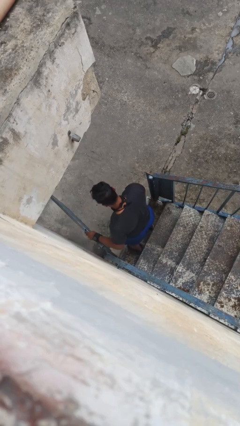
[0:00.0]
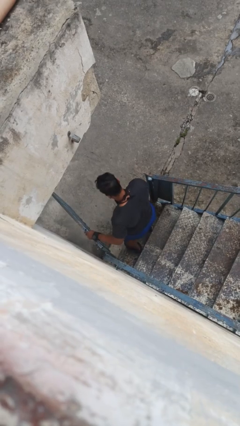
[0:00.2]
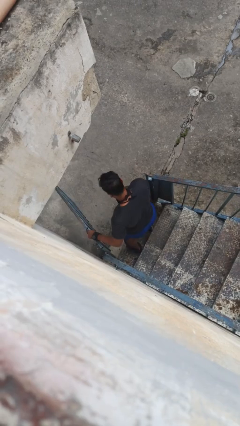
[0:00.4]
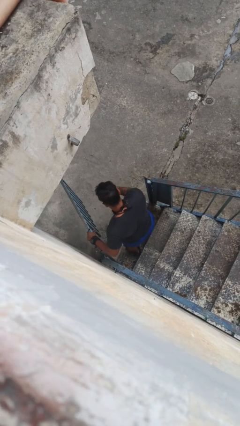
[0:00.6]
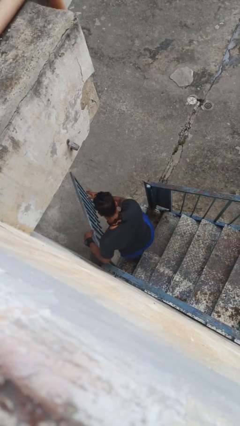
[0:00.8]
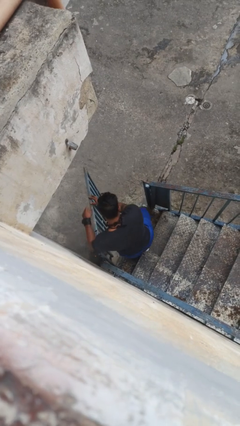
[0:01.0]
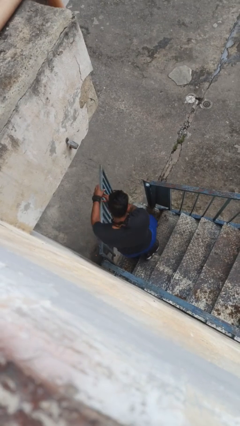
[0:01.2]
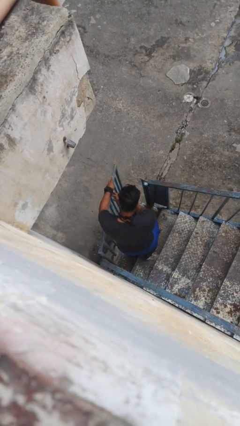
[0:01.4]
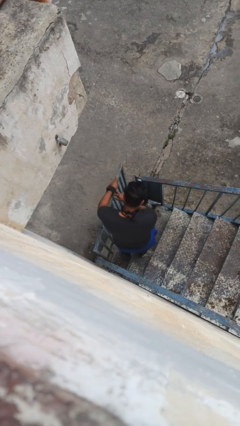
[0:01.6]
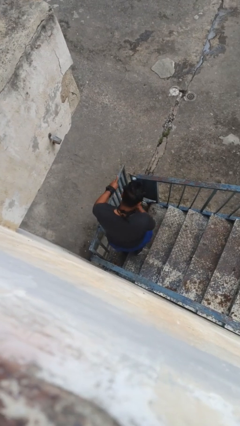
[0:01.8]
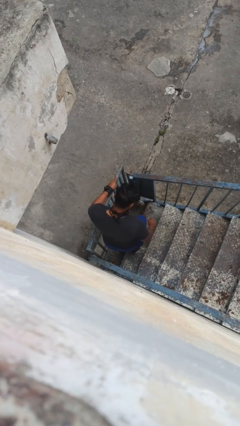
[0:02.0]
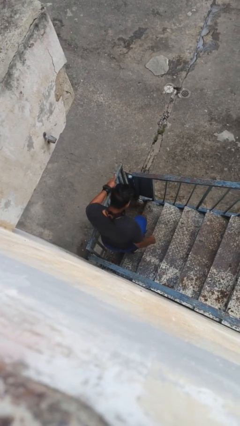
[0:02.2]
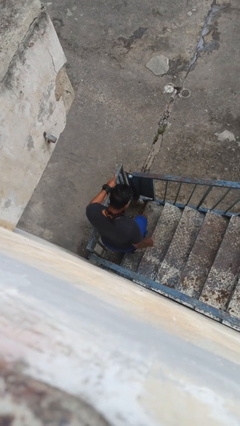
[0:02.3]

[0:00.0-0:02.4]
person closes facility door

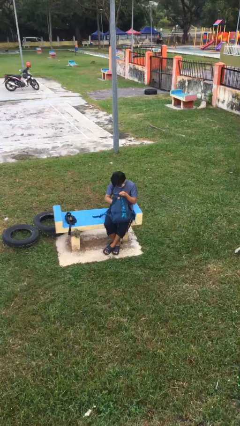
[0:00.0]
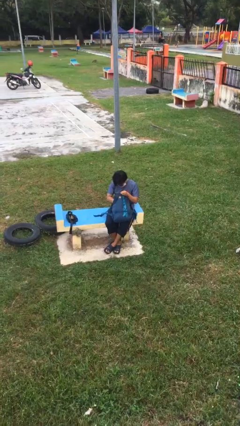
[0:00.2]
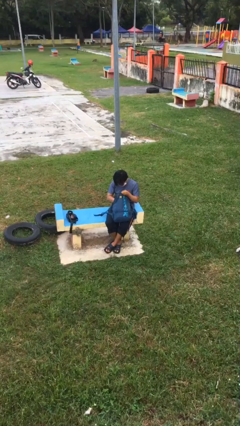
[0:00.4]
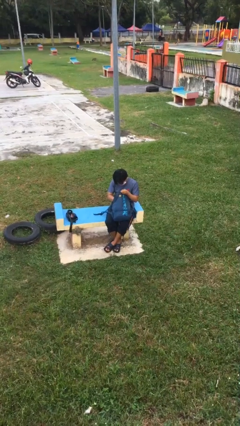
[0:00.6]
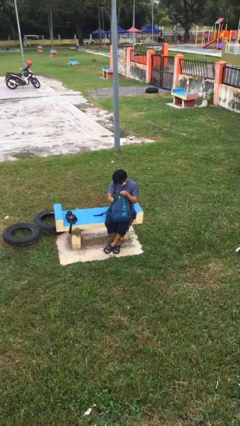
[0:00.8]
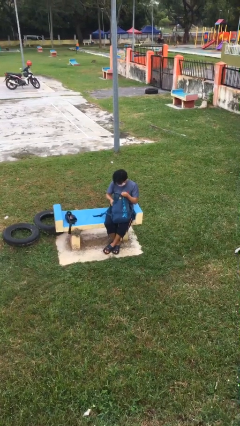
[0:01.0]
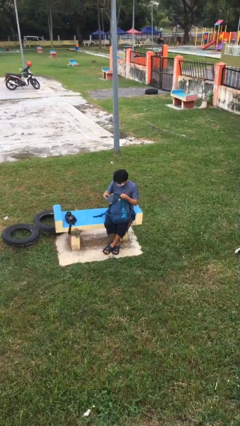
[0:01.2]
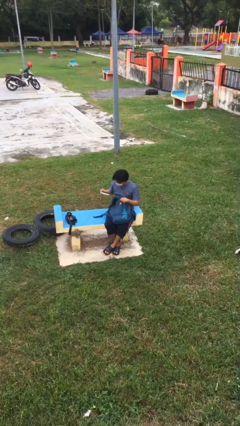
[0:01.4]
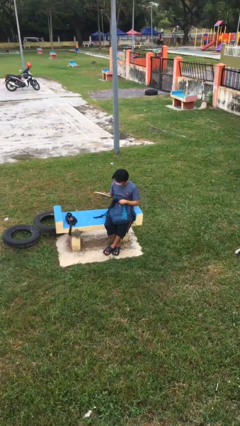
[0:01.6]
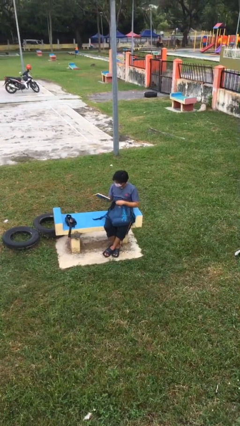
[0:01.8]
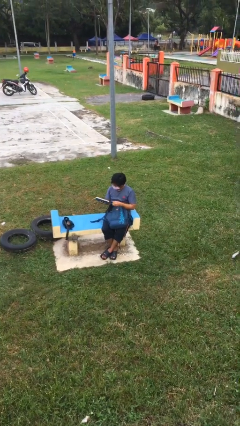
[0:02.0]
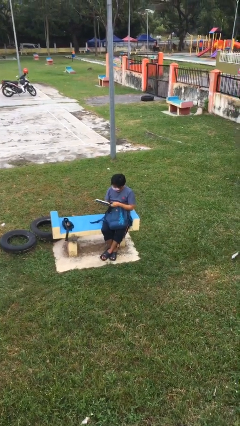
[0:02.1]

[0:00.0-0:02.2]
person takes object from backpack

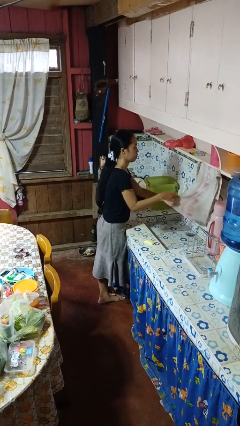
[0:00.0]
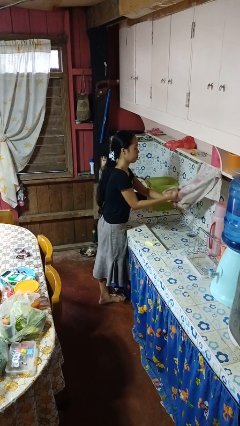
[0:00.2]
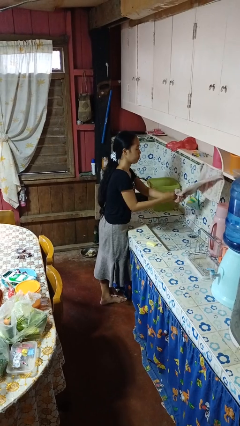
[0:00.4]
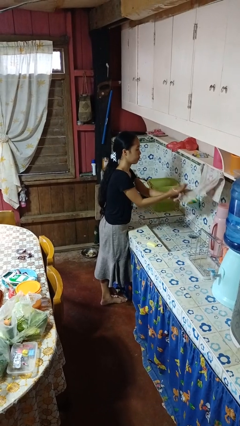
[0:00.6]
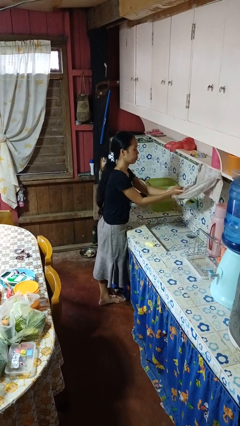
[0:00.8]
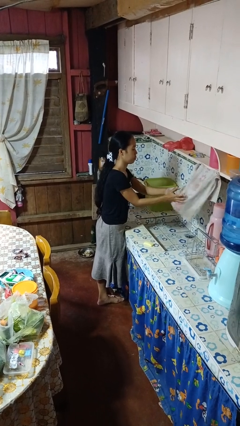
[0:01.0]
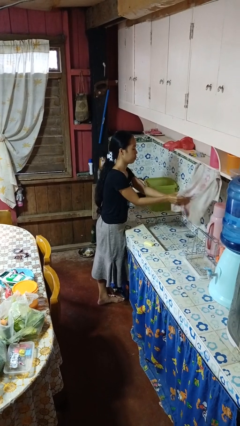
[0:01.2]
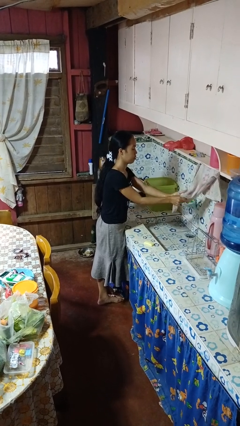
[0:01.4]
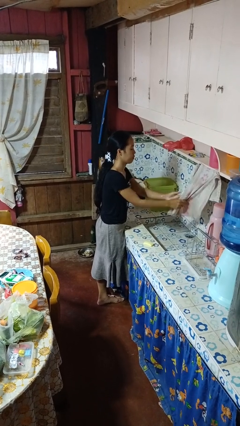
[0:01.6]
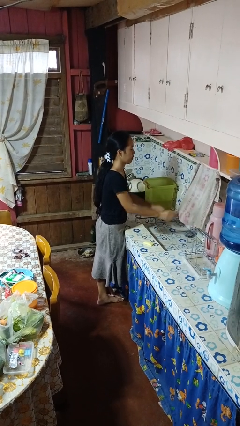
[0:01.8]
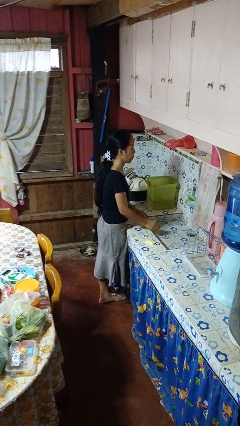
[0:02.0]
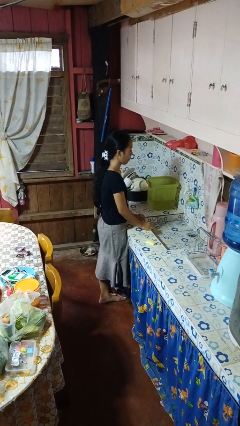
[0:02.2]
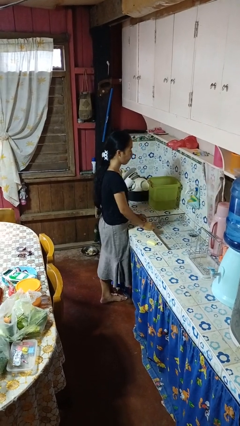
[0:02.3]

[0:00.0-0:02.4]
person dries hands with towel

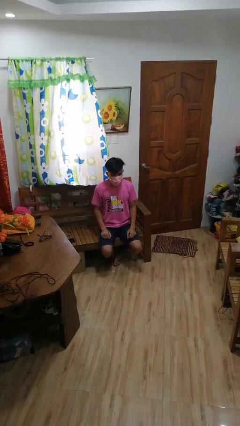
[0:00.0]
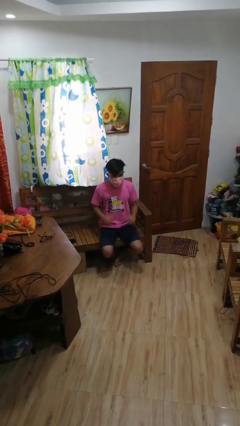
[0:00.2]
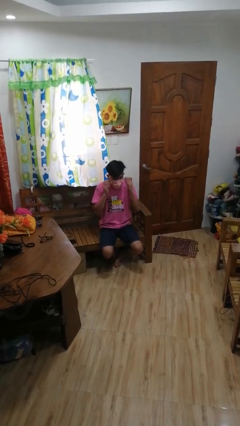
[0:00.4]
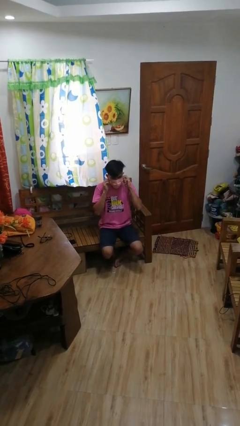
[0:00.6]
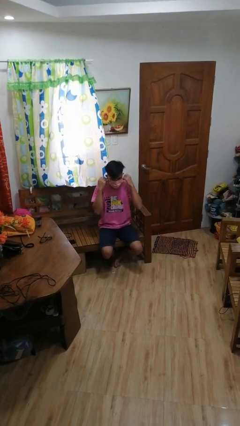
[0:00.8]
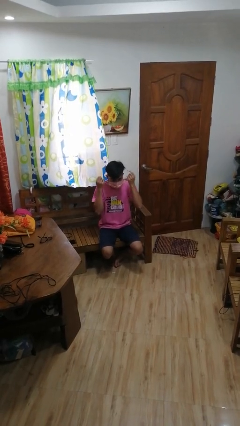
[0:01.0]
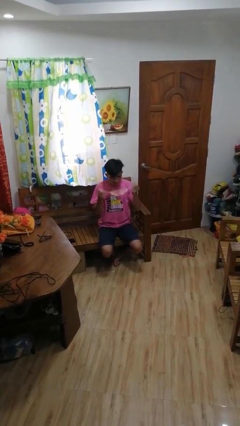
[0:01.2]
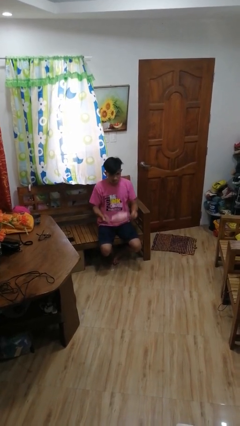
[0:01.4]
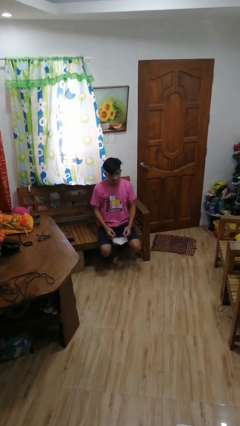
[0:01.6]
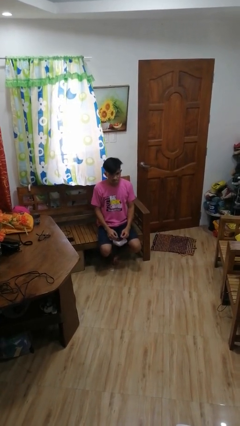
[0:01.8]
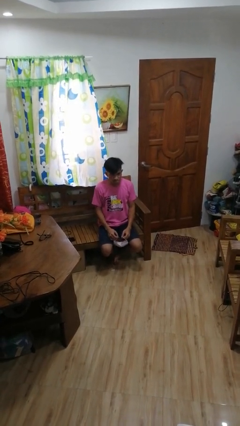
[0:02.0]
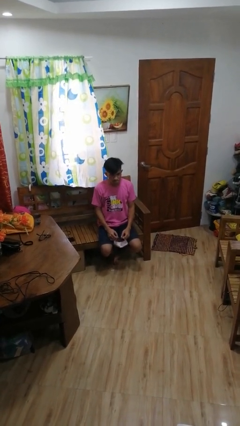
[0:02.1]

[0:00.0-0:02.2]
person takes off facemask

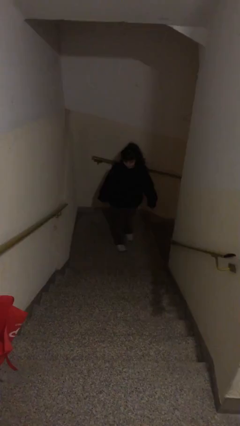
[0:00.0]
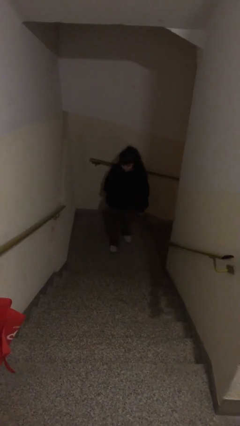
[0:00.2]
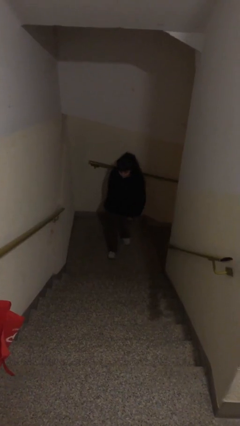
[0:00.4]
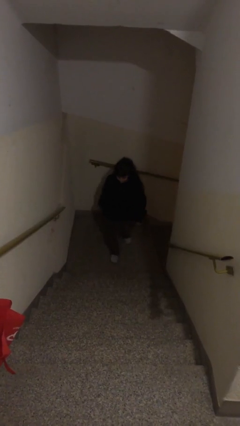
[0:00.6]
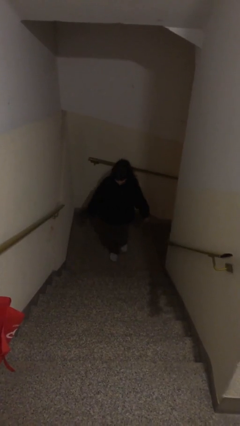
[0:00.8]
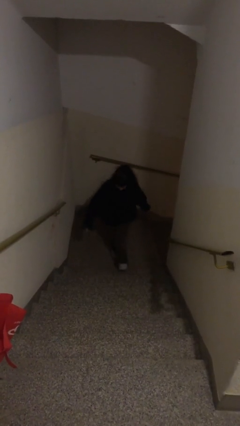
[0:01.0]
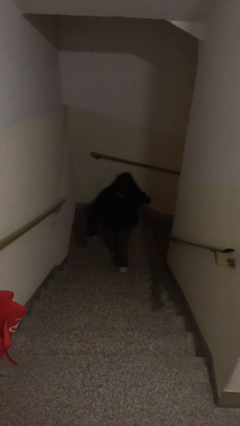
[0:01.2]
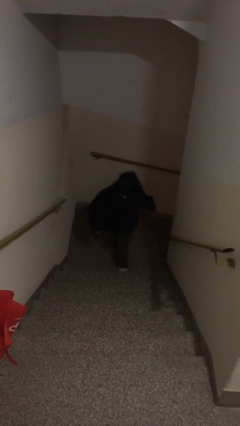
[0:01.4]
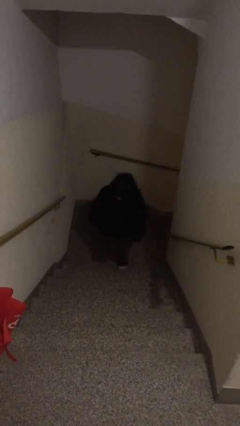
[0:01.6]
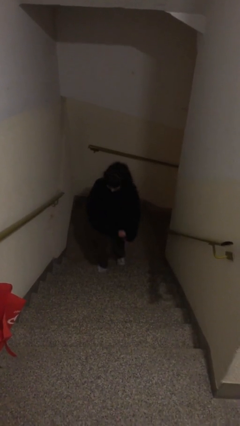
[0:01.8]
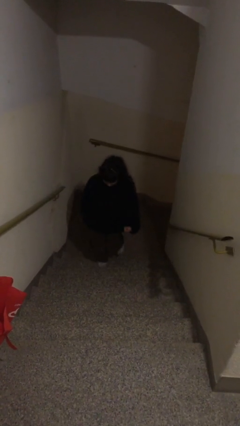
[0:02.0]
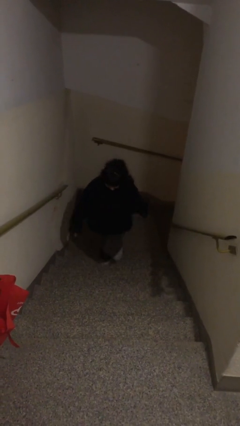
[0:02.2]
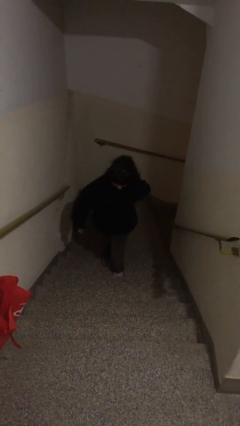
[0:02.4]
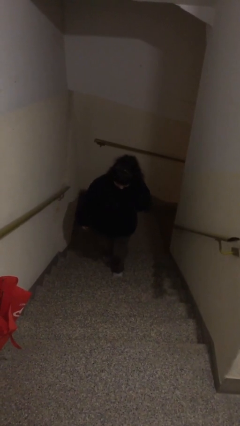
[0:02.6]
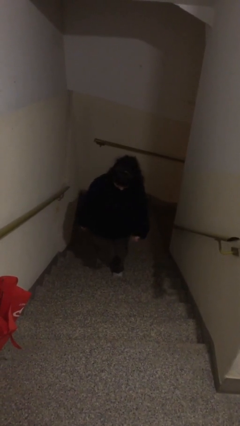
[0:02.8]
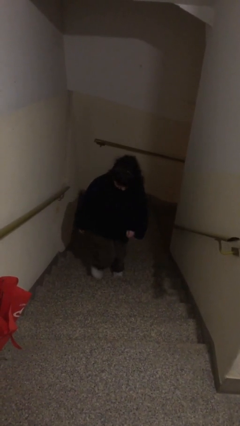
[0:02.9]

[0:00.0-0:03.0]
person climbs up stairs

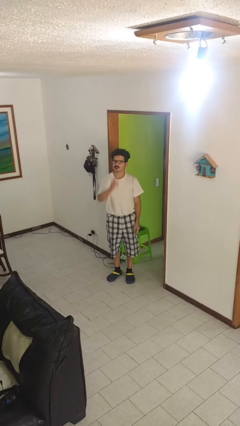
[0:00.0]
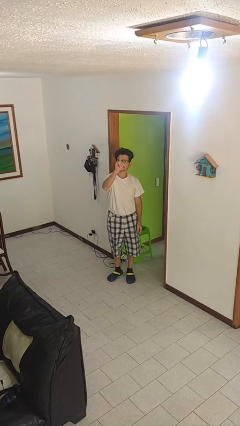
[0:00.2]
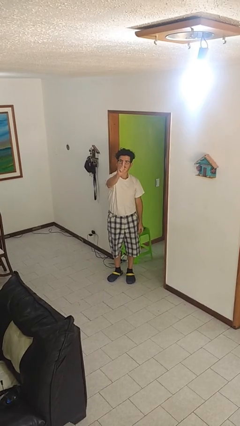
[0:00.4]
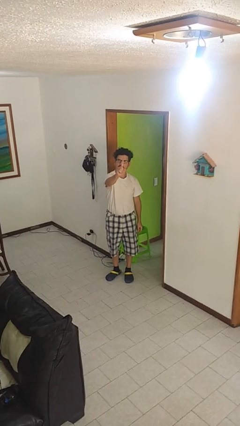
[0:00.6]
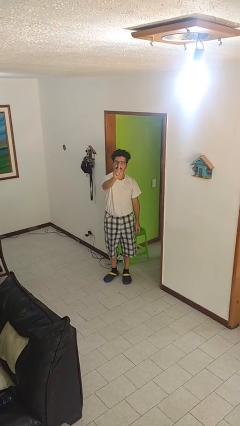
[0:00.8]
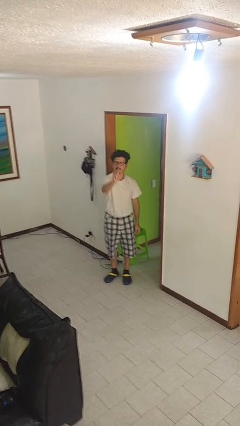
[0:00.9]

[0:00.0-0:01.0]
person gestures number one

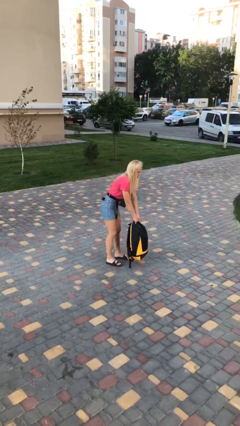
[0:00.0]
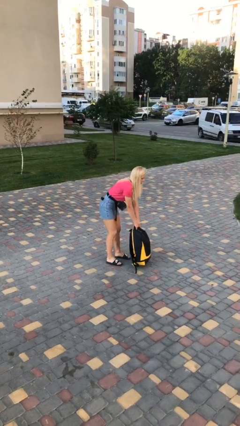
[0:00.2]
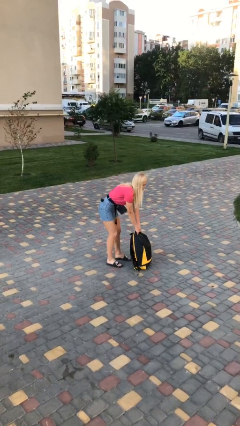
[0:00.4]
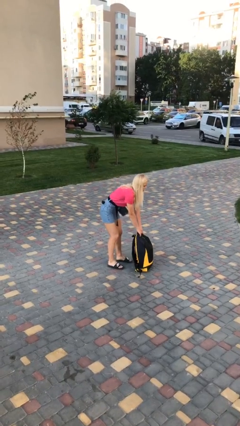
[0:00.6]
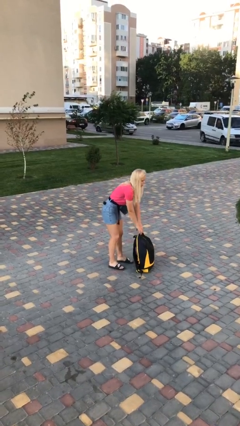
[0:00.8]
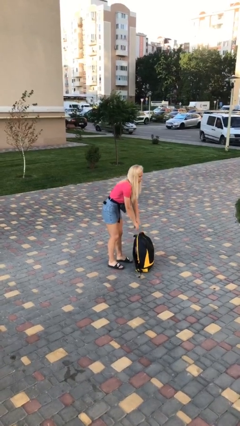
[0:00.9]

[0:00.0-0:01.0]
person puts down object on floor

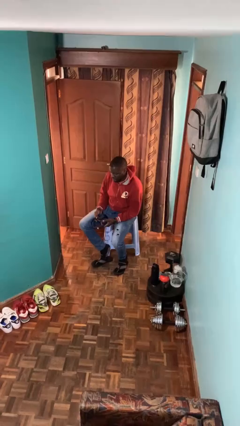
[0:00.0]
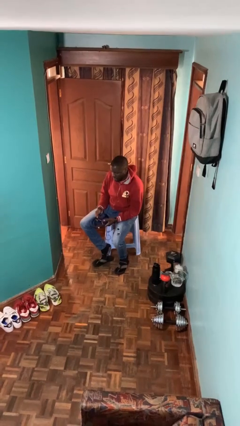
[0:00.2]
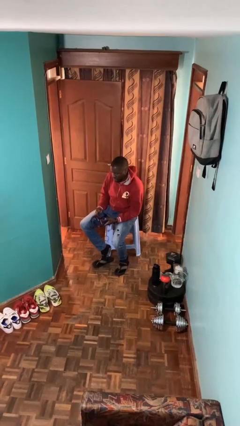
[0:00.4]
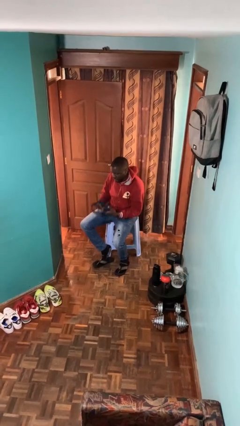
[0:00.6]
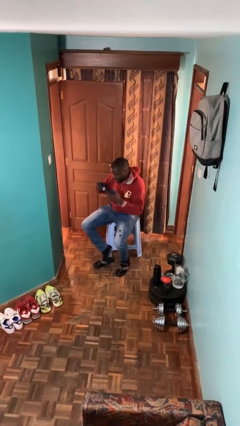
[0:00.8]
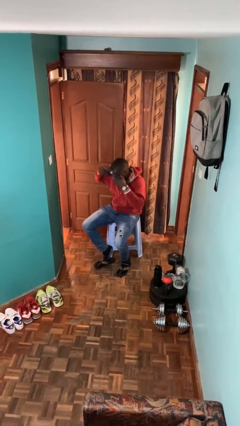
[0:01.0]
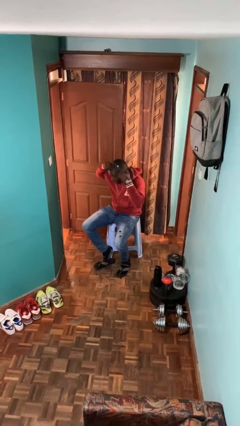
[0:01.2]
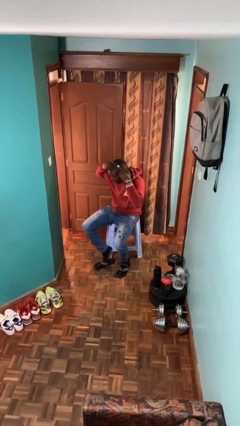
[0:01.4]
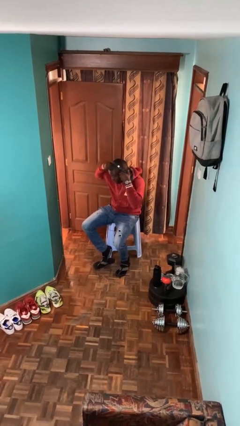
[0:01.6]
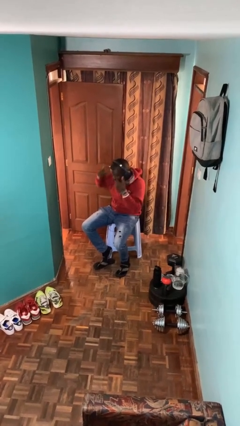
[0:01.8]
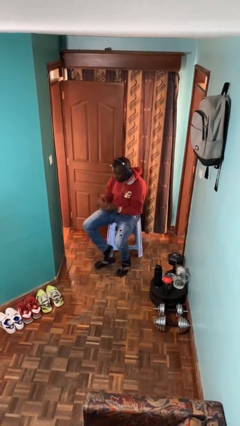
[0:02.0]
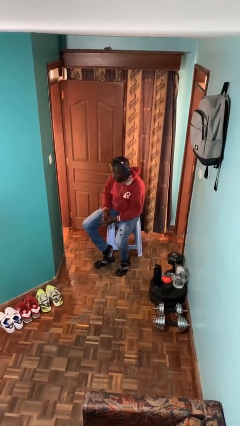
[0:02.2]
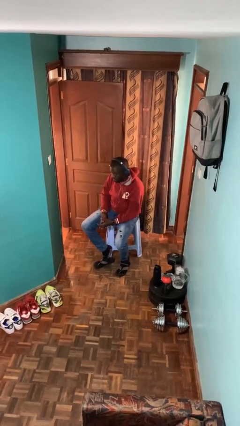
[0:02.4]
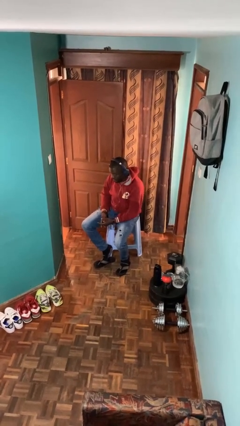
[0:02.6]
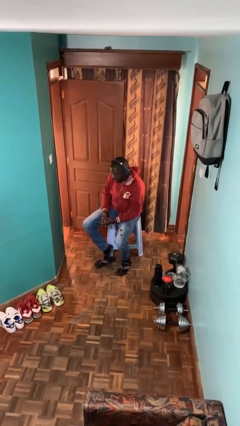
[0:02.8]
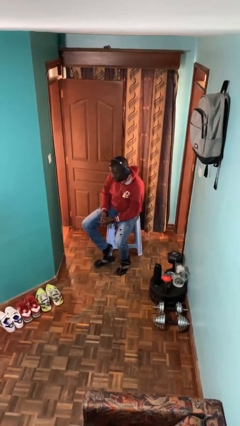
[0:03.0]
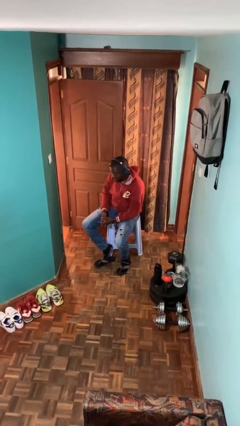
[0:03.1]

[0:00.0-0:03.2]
person puts on headphones
